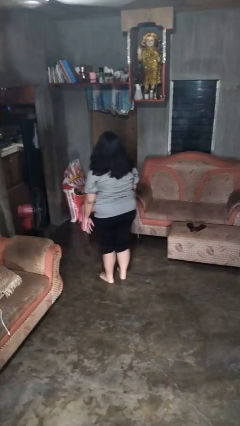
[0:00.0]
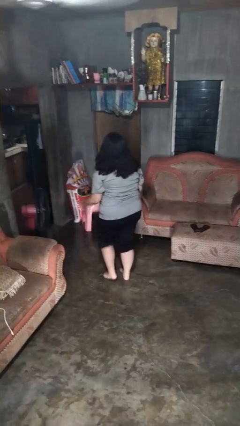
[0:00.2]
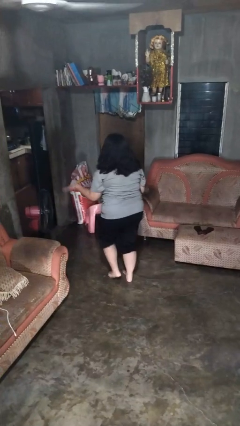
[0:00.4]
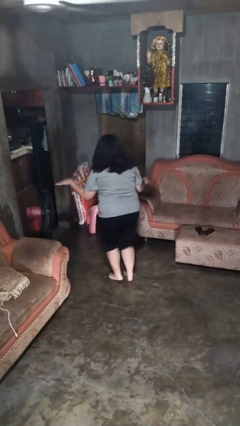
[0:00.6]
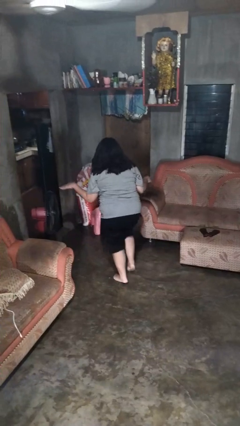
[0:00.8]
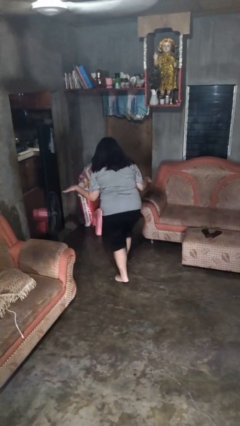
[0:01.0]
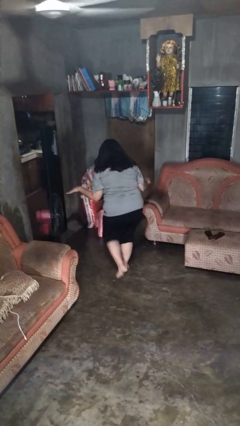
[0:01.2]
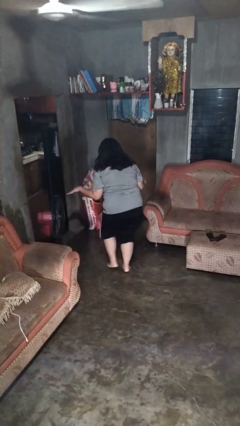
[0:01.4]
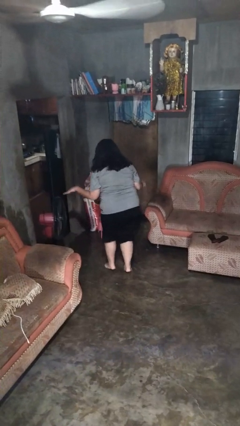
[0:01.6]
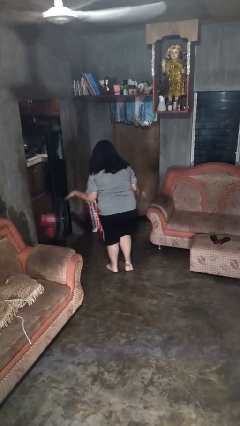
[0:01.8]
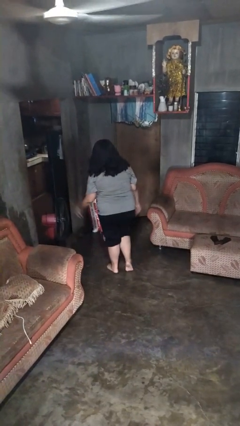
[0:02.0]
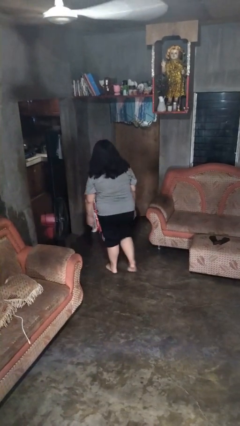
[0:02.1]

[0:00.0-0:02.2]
person walks tiptoe

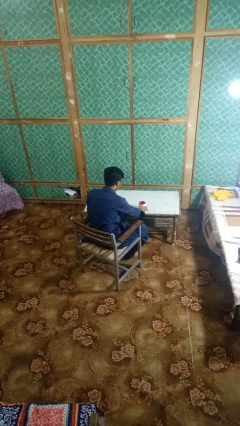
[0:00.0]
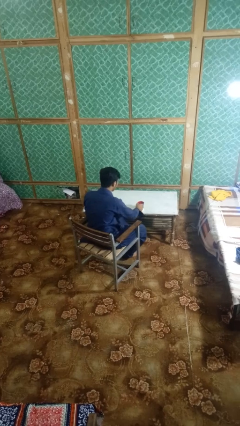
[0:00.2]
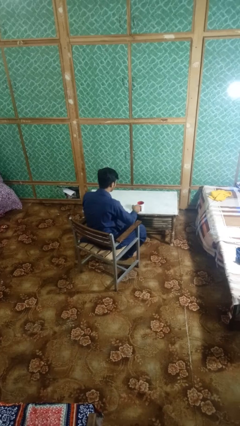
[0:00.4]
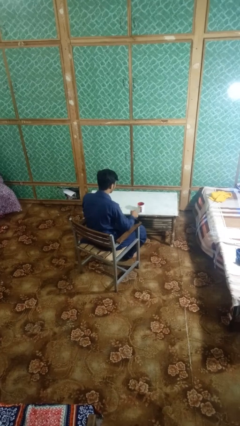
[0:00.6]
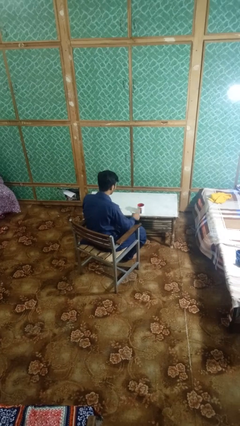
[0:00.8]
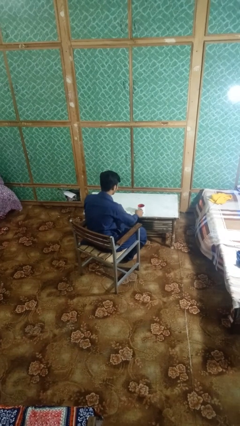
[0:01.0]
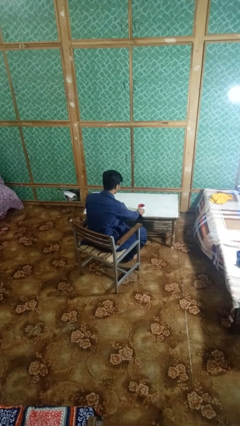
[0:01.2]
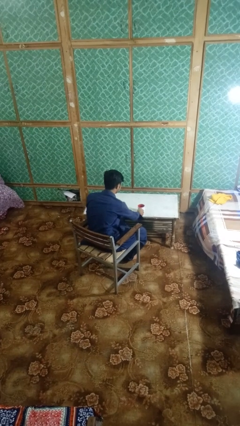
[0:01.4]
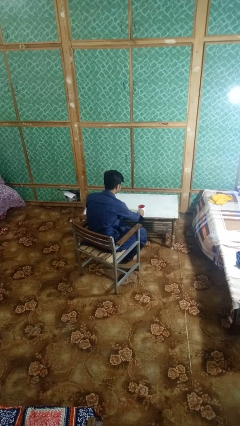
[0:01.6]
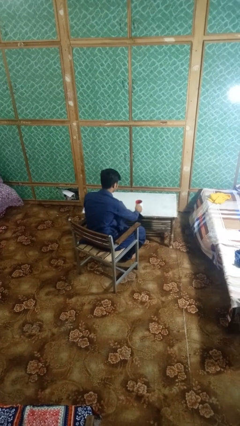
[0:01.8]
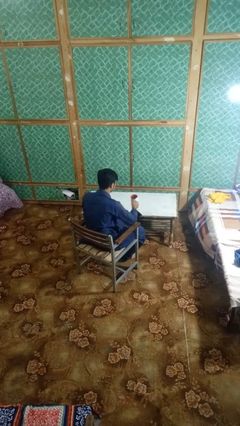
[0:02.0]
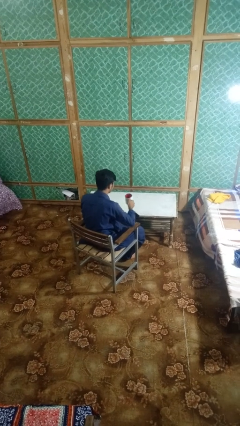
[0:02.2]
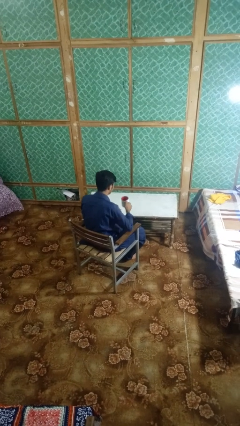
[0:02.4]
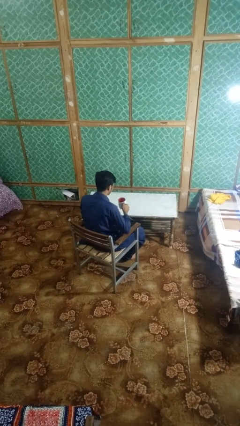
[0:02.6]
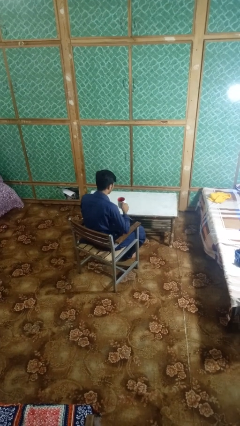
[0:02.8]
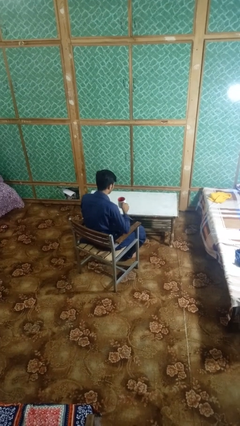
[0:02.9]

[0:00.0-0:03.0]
person picks up object from table

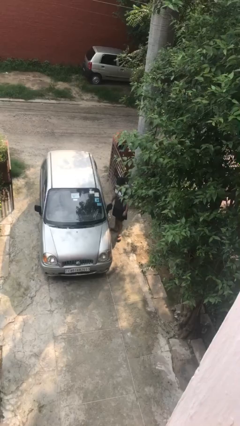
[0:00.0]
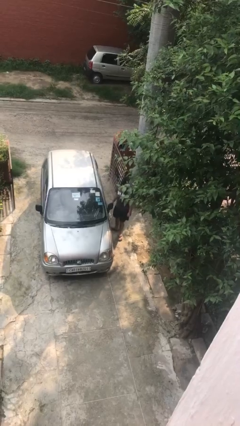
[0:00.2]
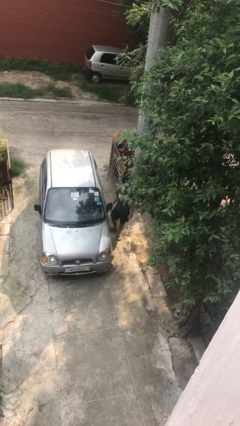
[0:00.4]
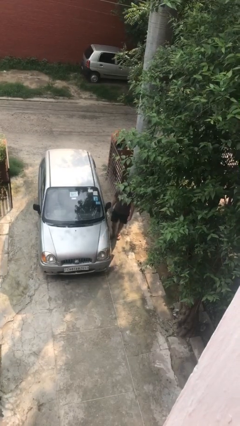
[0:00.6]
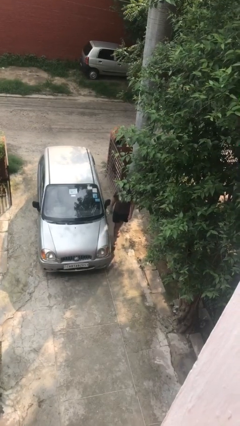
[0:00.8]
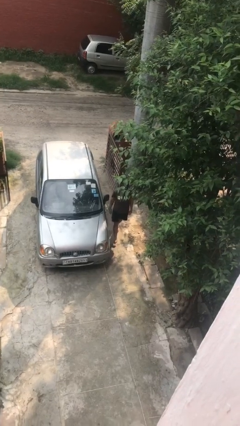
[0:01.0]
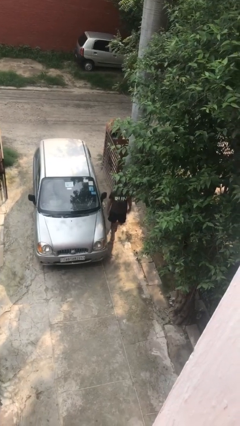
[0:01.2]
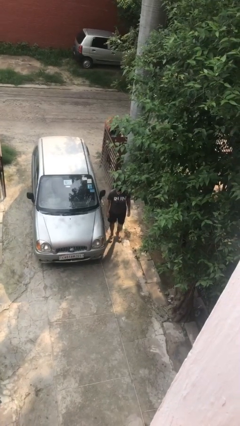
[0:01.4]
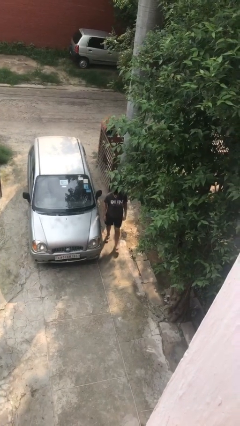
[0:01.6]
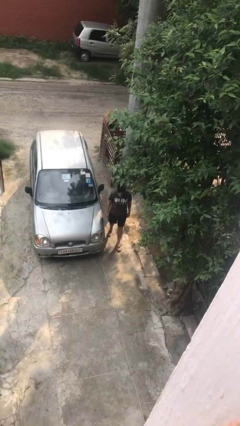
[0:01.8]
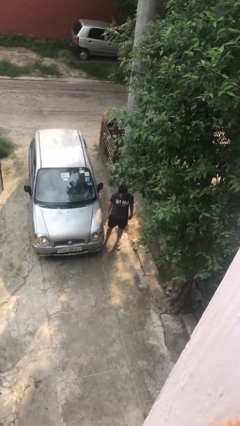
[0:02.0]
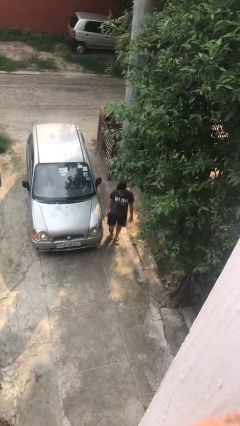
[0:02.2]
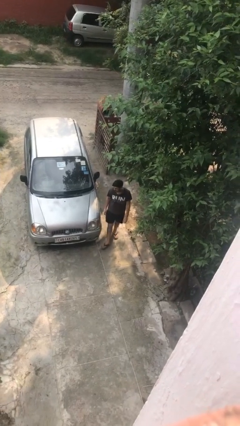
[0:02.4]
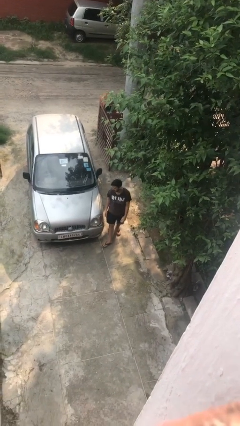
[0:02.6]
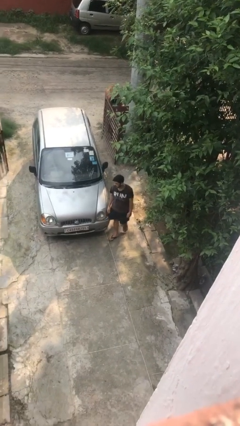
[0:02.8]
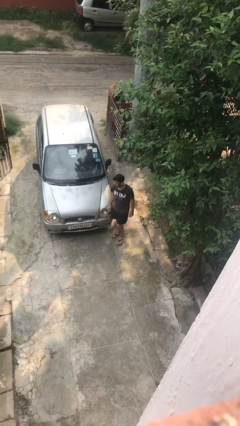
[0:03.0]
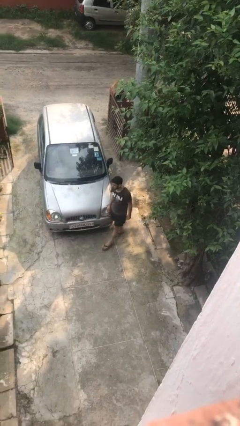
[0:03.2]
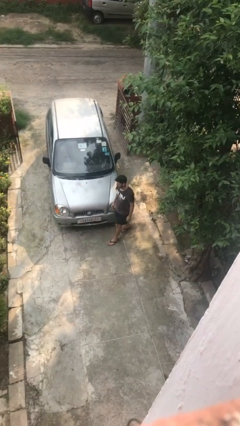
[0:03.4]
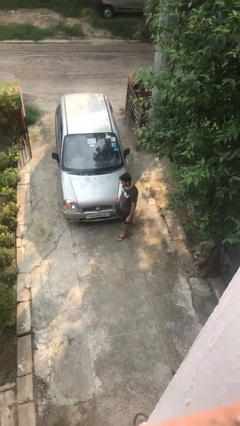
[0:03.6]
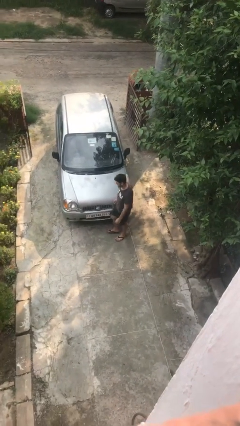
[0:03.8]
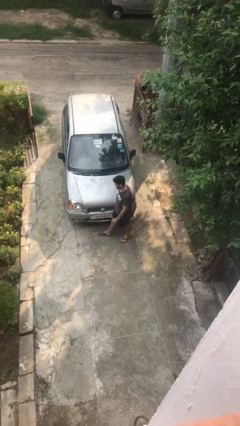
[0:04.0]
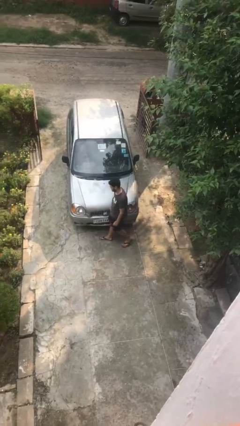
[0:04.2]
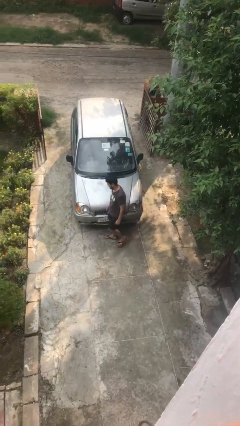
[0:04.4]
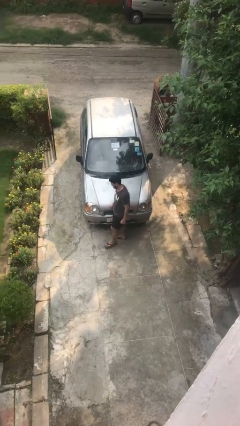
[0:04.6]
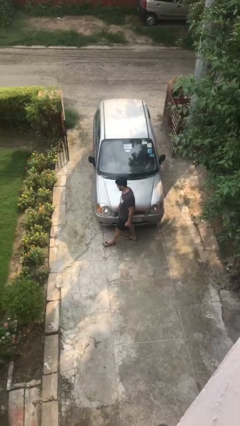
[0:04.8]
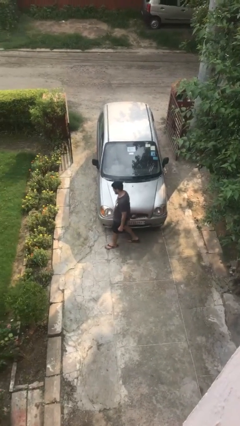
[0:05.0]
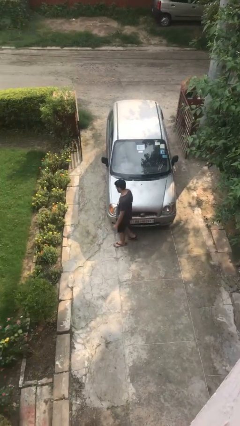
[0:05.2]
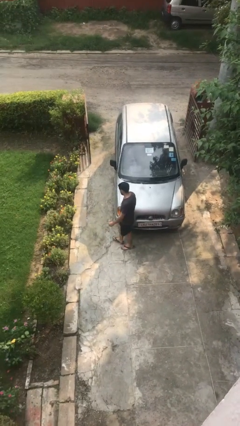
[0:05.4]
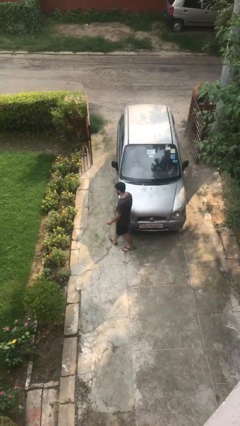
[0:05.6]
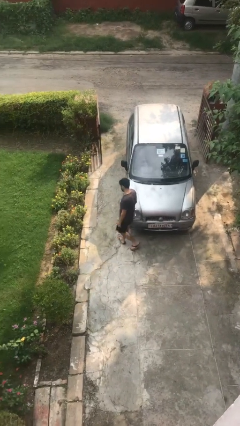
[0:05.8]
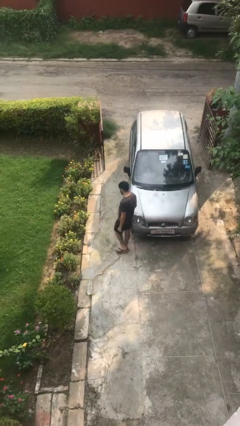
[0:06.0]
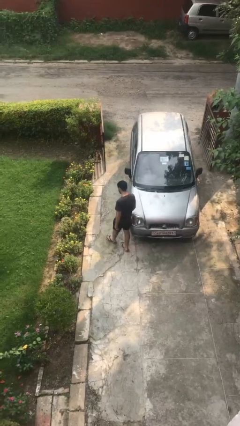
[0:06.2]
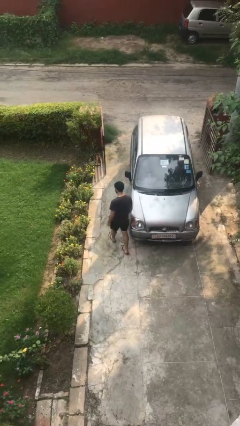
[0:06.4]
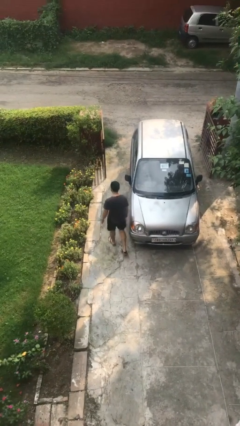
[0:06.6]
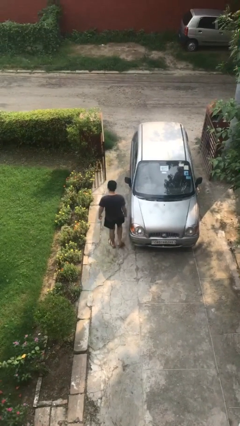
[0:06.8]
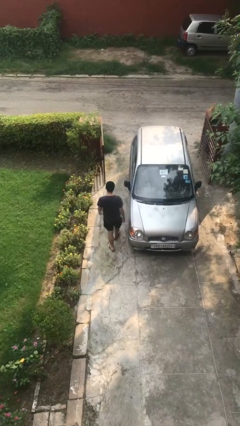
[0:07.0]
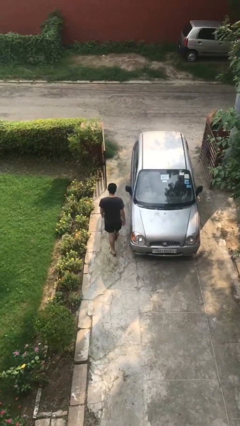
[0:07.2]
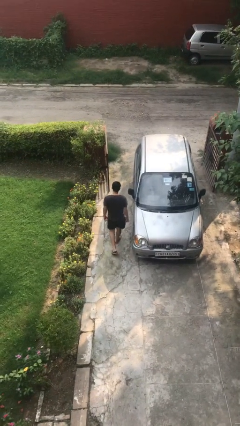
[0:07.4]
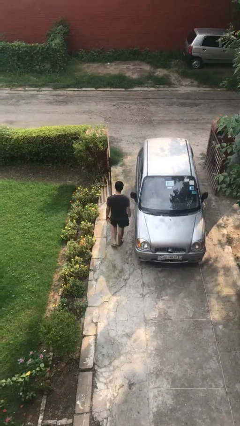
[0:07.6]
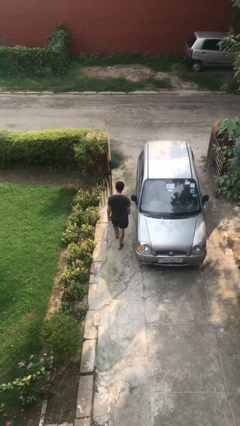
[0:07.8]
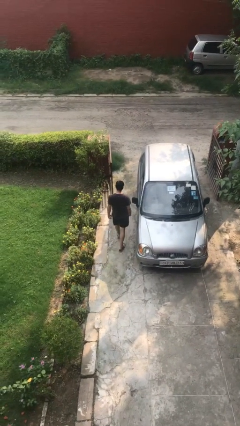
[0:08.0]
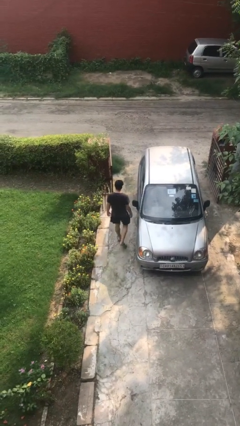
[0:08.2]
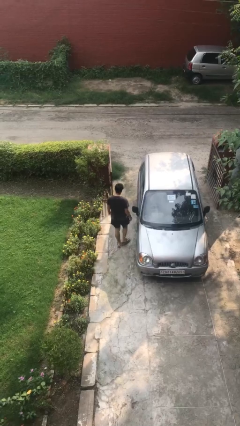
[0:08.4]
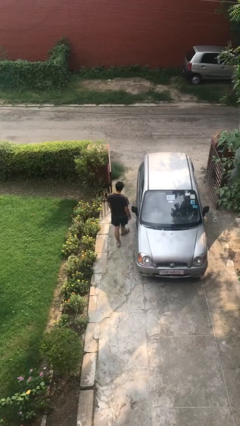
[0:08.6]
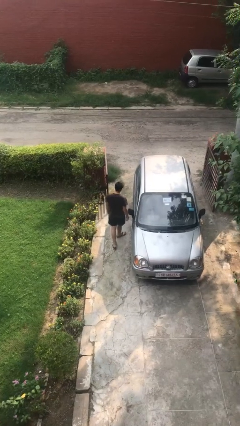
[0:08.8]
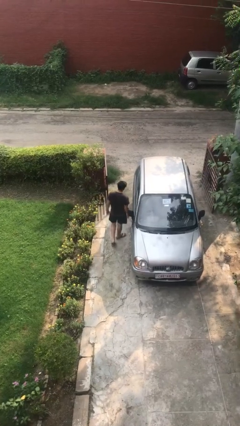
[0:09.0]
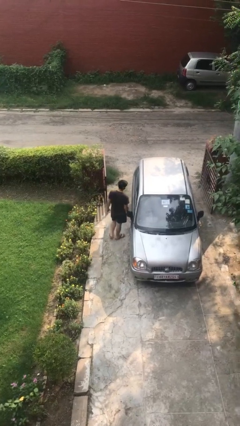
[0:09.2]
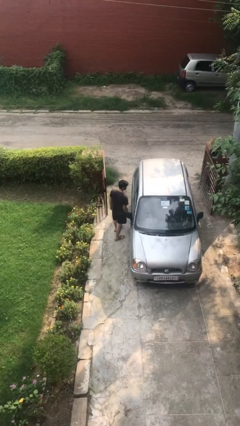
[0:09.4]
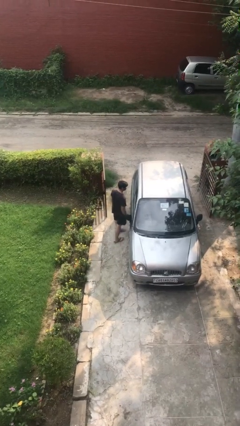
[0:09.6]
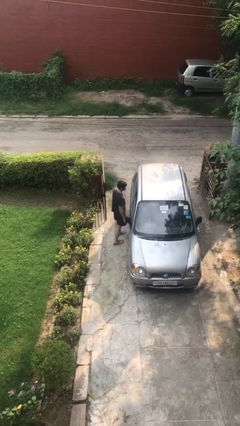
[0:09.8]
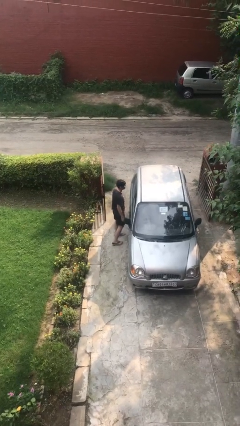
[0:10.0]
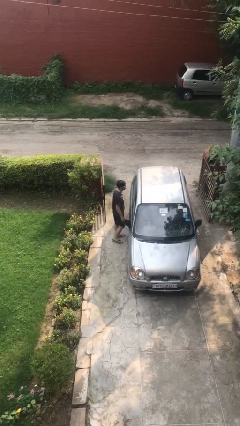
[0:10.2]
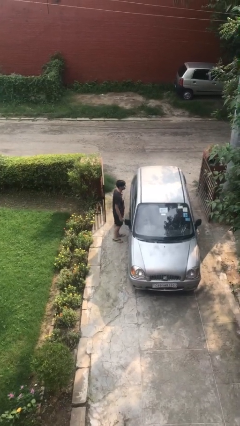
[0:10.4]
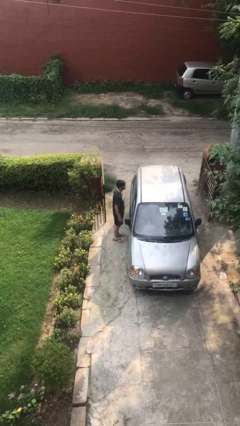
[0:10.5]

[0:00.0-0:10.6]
person walks around car

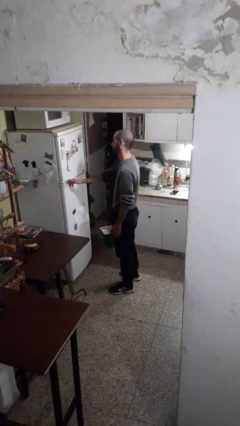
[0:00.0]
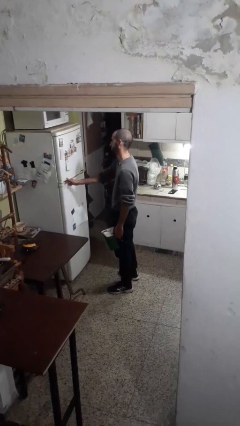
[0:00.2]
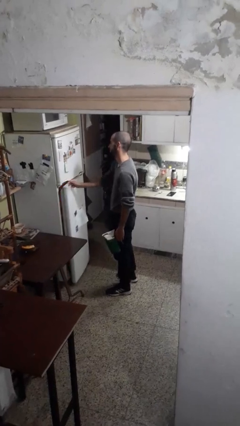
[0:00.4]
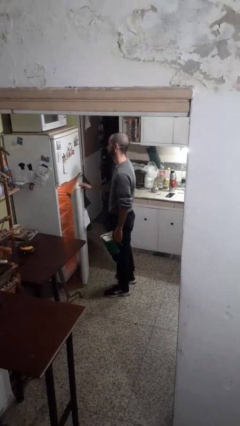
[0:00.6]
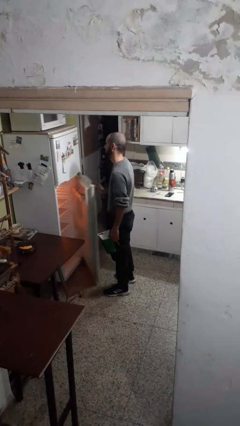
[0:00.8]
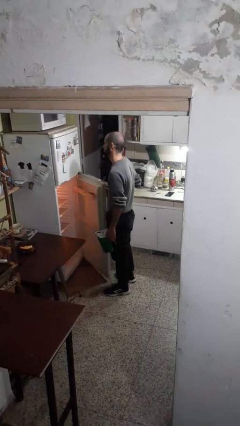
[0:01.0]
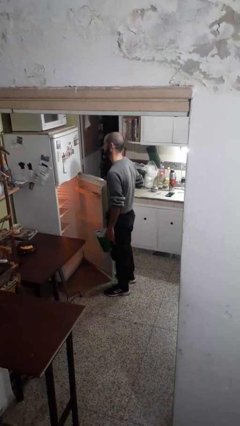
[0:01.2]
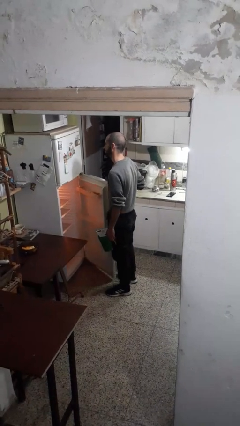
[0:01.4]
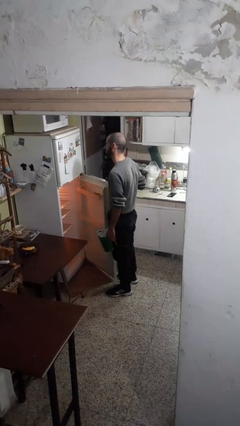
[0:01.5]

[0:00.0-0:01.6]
person opens refrigerator

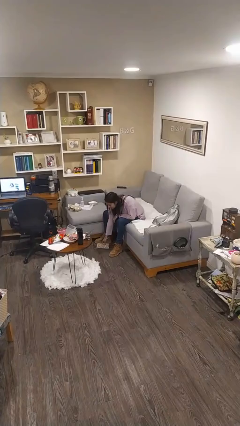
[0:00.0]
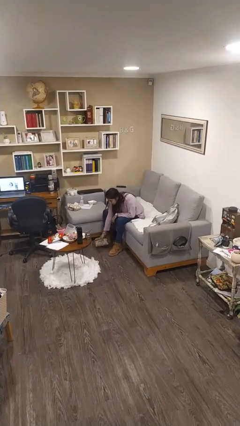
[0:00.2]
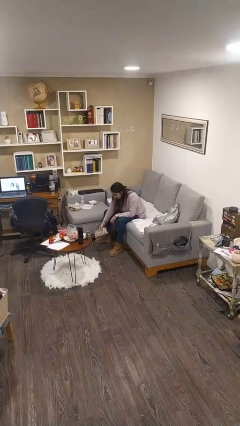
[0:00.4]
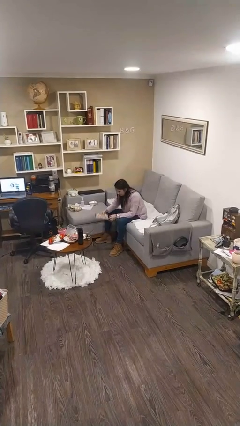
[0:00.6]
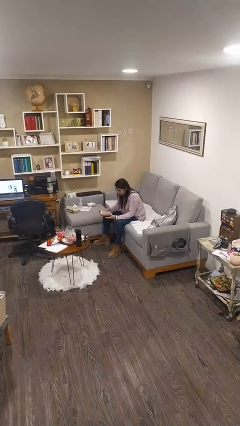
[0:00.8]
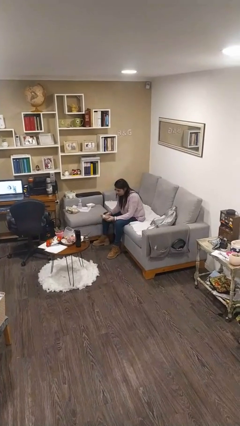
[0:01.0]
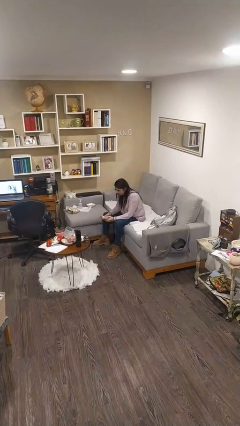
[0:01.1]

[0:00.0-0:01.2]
person picks up object from floor
